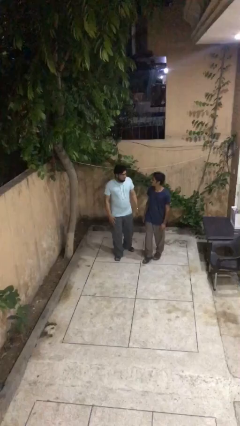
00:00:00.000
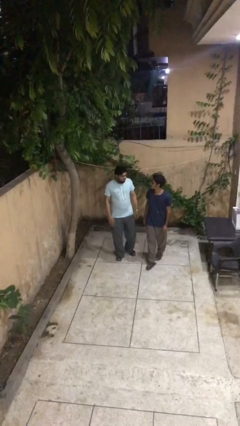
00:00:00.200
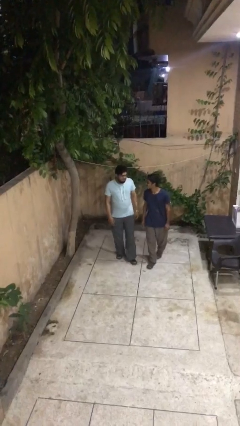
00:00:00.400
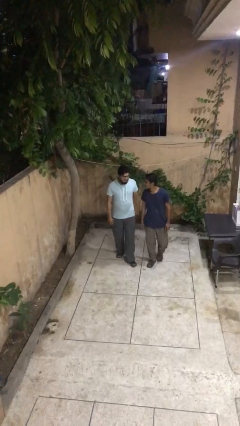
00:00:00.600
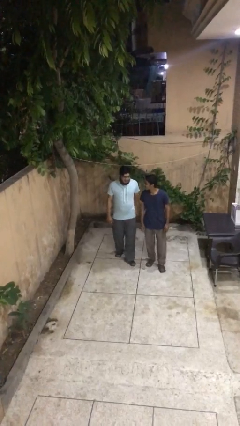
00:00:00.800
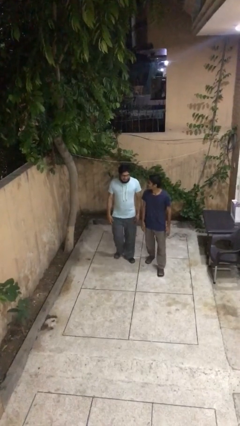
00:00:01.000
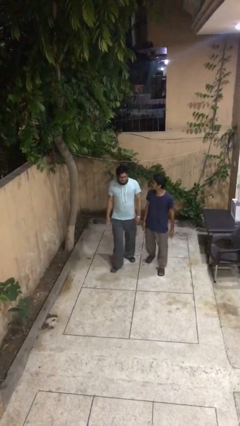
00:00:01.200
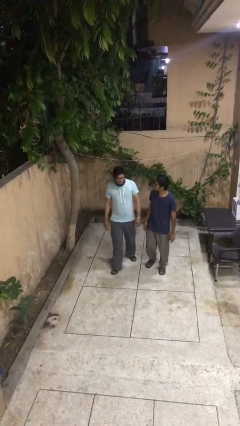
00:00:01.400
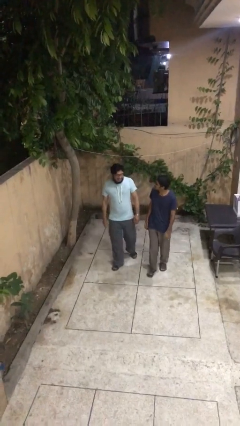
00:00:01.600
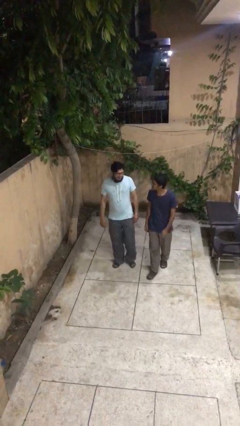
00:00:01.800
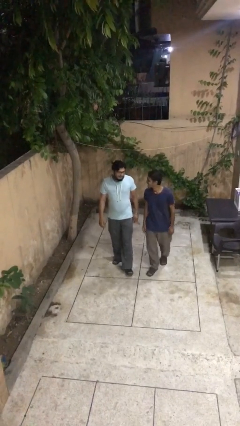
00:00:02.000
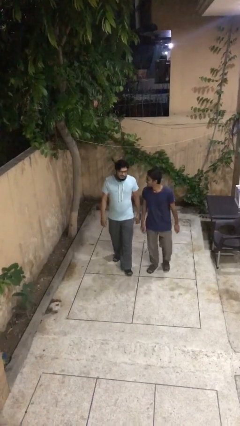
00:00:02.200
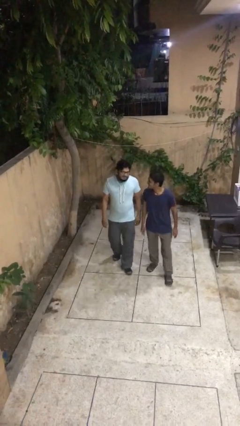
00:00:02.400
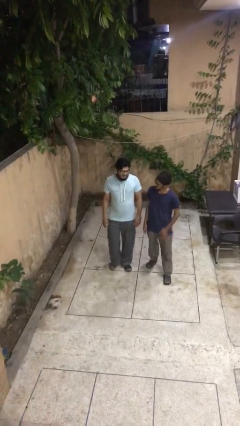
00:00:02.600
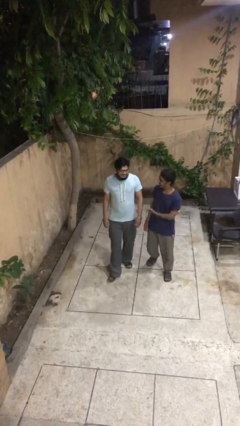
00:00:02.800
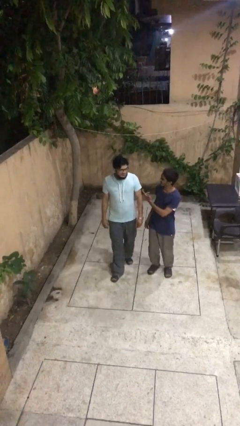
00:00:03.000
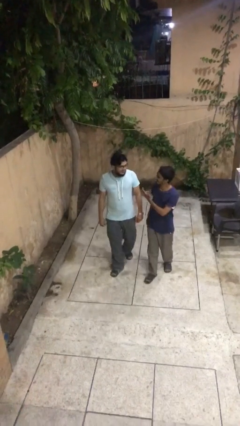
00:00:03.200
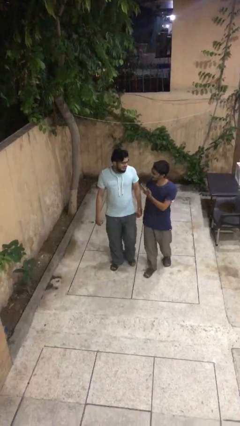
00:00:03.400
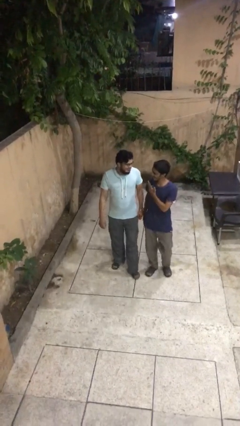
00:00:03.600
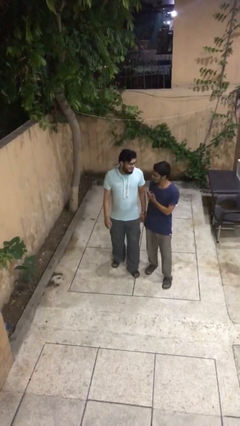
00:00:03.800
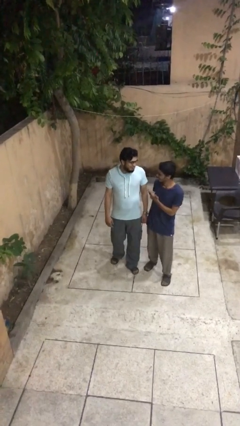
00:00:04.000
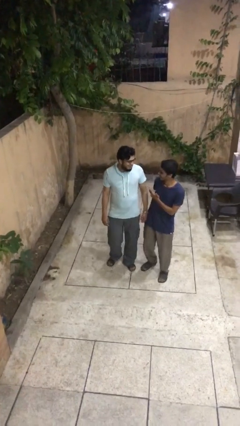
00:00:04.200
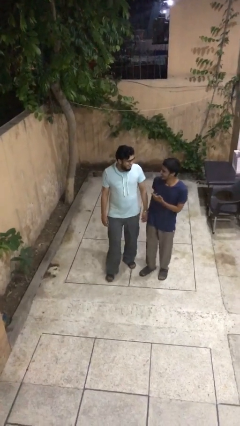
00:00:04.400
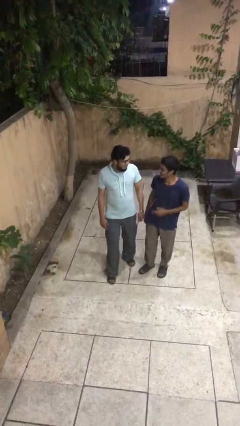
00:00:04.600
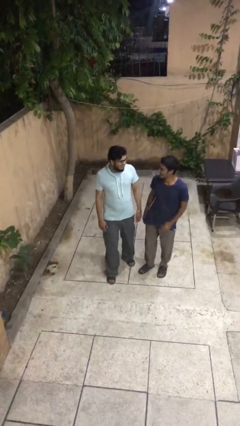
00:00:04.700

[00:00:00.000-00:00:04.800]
person talks to person

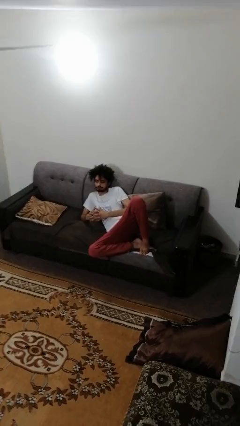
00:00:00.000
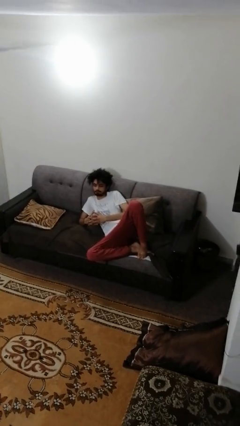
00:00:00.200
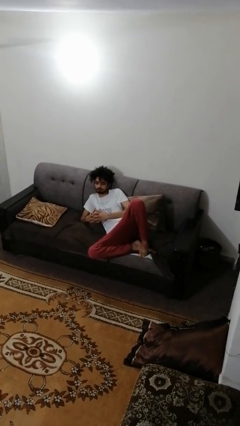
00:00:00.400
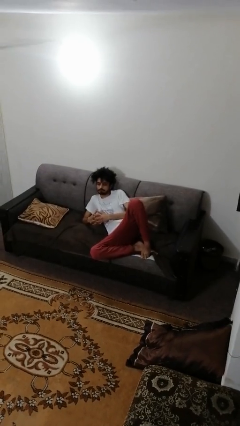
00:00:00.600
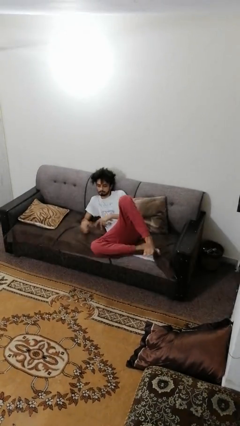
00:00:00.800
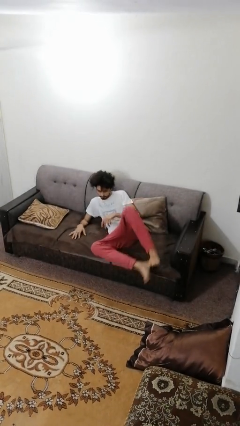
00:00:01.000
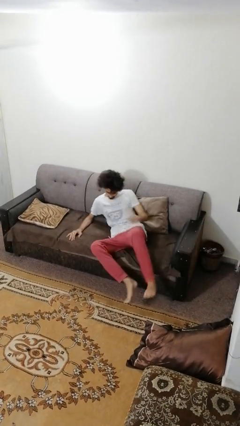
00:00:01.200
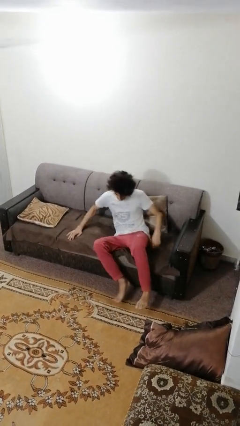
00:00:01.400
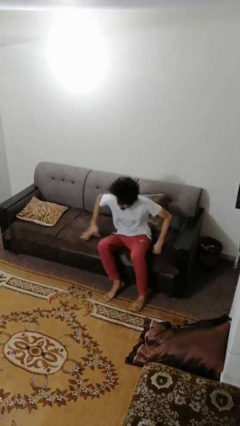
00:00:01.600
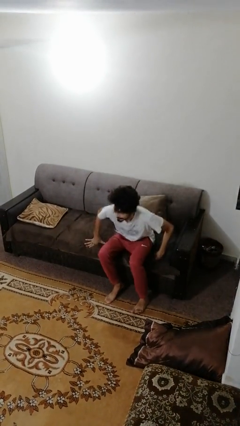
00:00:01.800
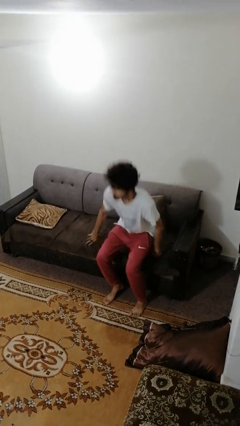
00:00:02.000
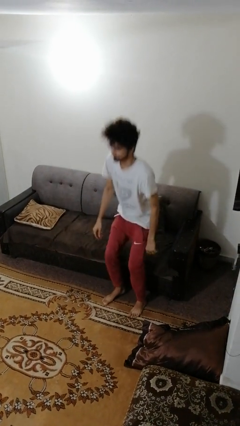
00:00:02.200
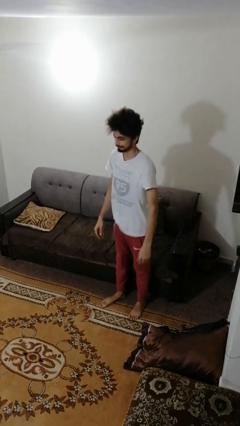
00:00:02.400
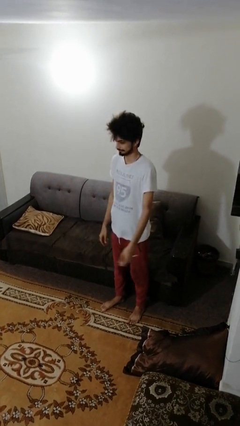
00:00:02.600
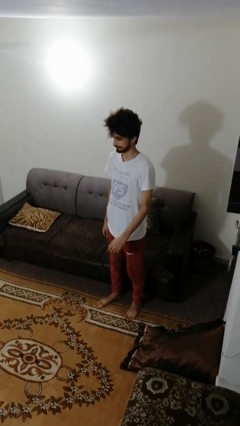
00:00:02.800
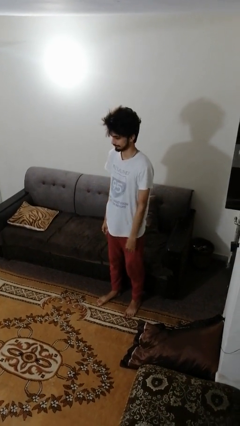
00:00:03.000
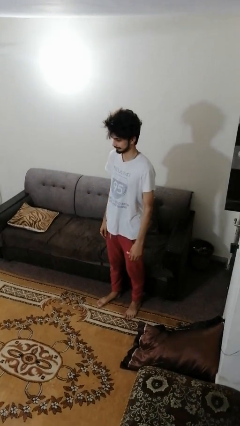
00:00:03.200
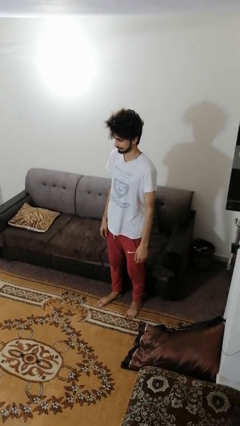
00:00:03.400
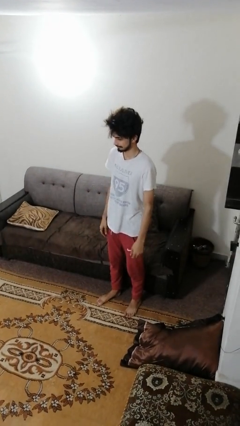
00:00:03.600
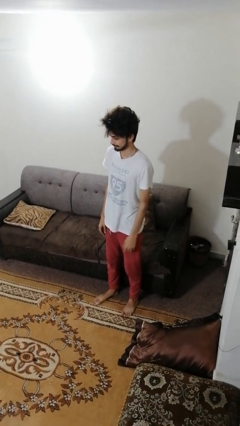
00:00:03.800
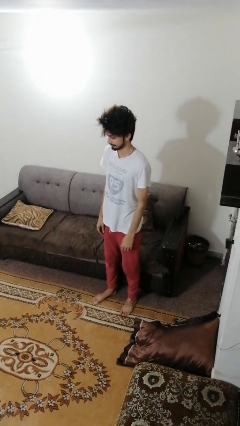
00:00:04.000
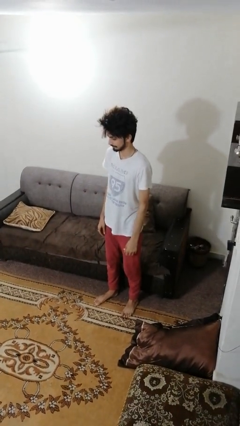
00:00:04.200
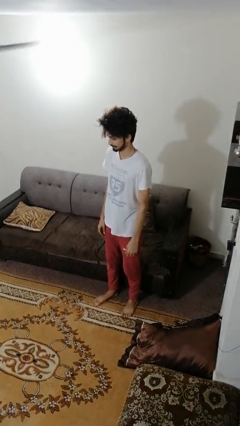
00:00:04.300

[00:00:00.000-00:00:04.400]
person stands up

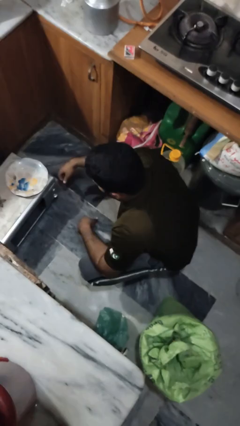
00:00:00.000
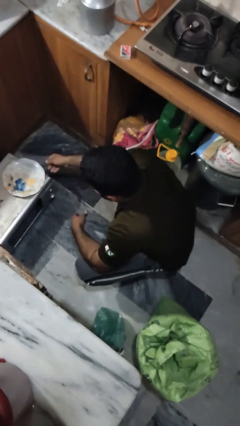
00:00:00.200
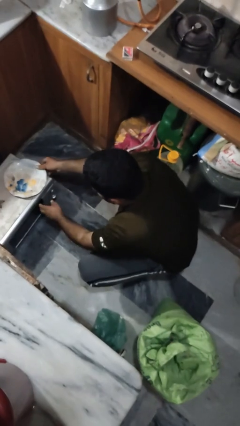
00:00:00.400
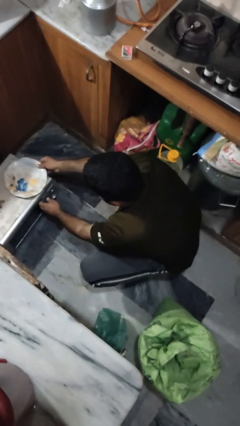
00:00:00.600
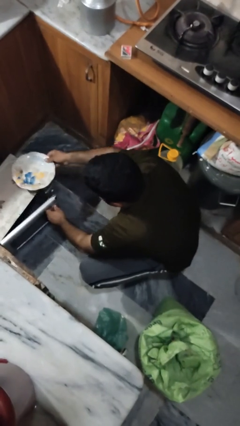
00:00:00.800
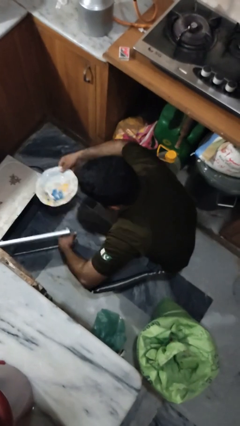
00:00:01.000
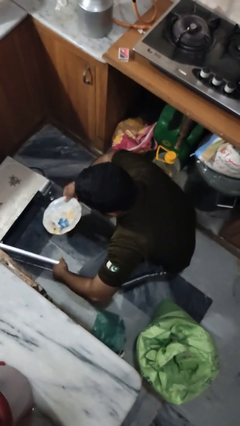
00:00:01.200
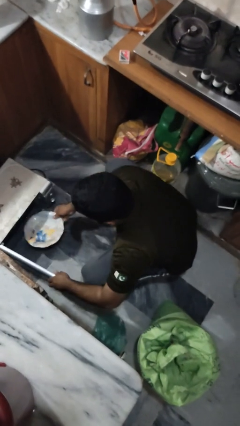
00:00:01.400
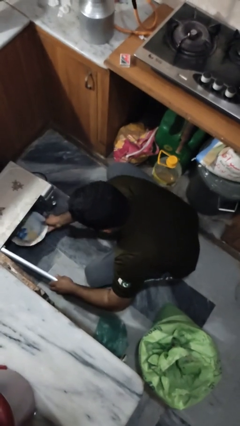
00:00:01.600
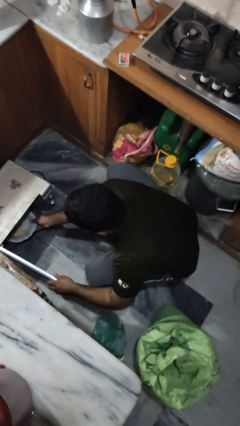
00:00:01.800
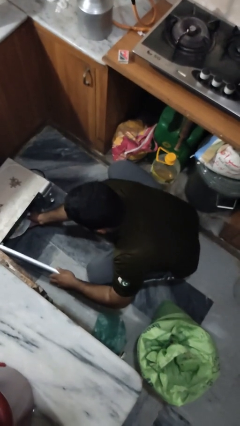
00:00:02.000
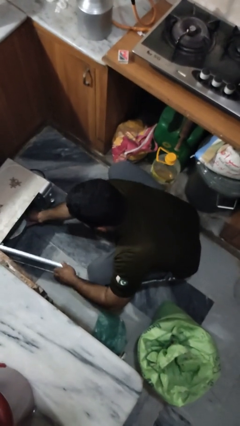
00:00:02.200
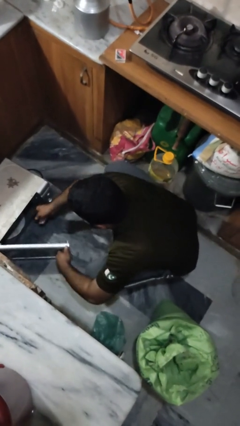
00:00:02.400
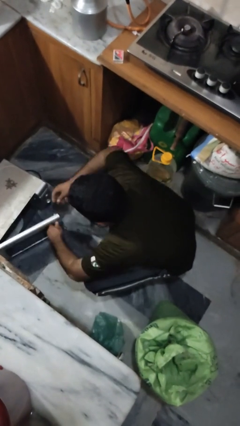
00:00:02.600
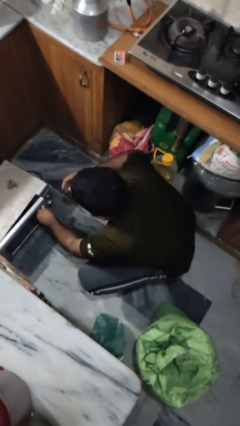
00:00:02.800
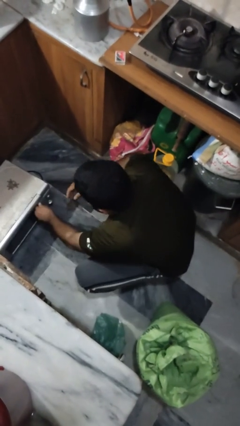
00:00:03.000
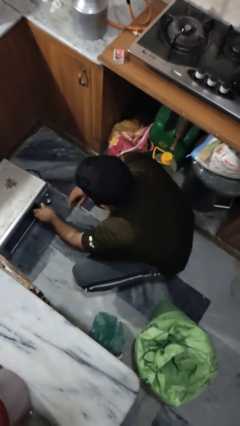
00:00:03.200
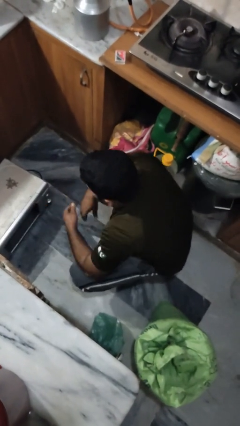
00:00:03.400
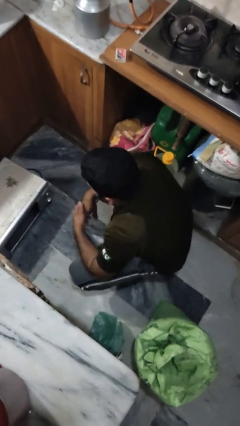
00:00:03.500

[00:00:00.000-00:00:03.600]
person puts object into oven

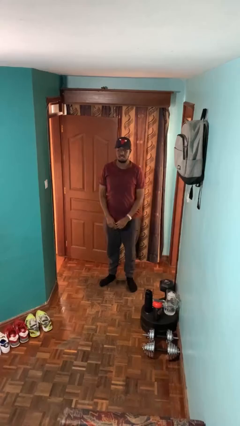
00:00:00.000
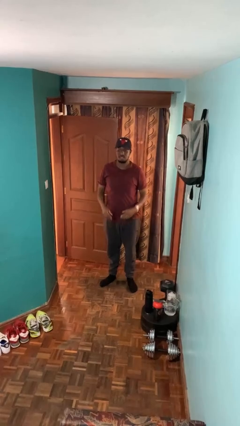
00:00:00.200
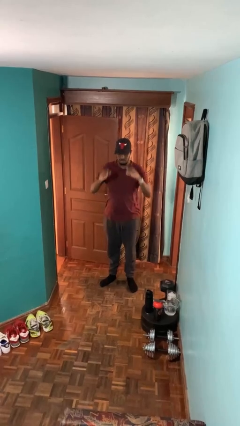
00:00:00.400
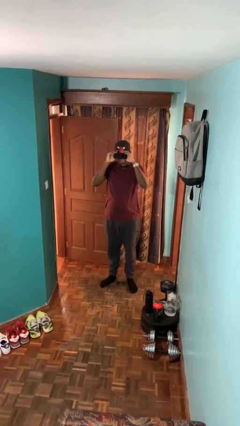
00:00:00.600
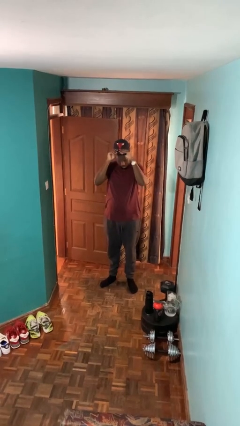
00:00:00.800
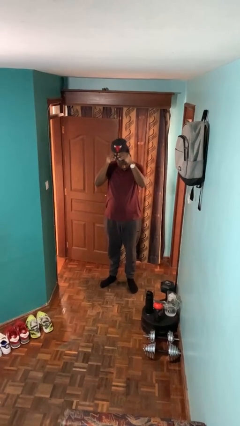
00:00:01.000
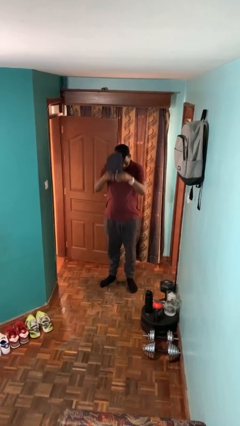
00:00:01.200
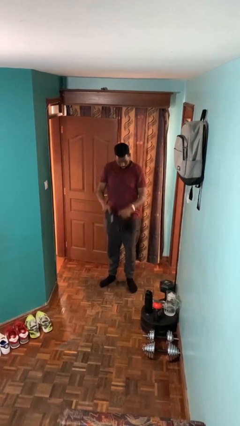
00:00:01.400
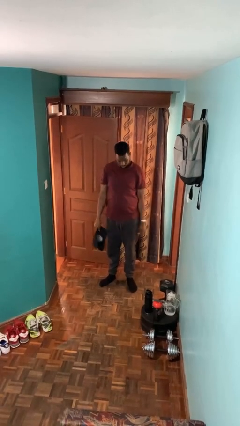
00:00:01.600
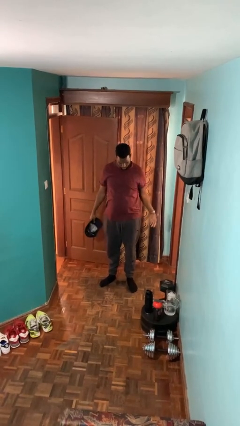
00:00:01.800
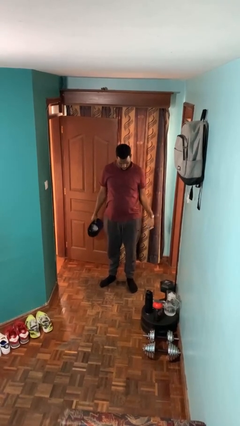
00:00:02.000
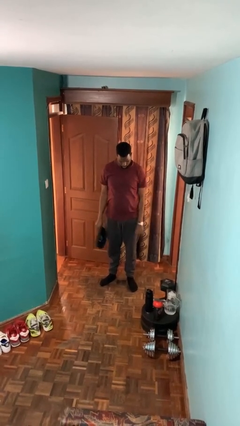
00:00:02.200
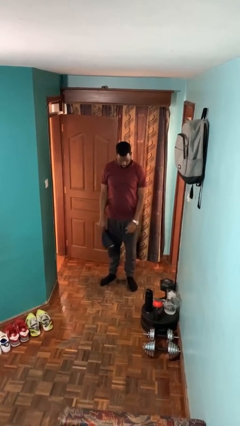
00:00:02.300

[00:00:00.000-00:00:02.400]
person takes off hat

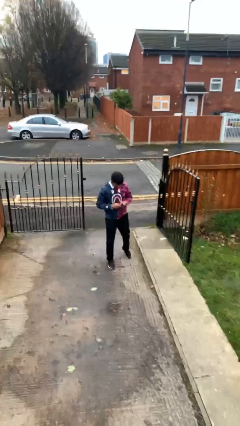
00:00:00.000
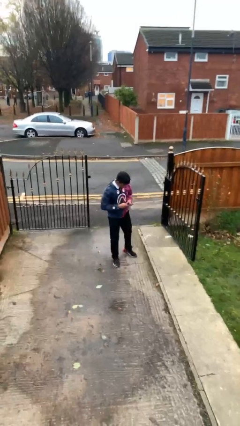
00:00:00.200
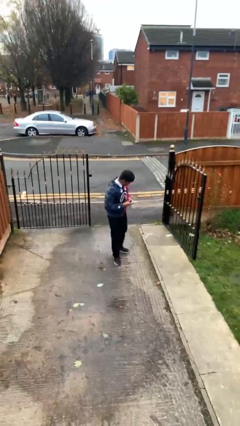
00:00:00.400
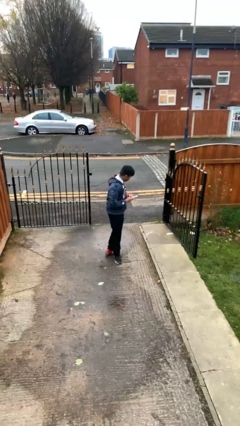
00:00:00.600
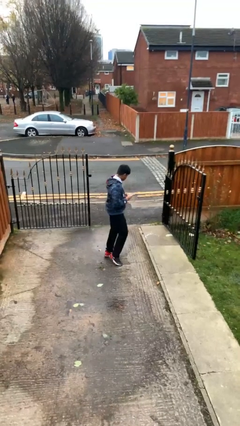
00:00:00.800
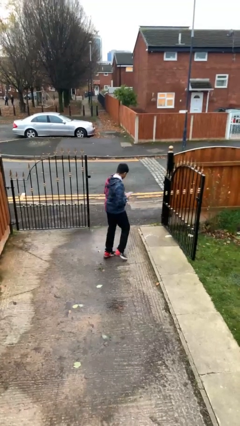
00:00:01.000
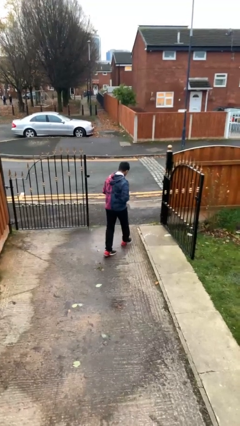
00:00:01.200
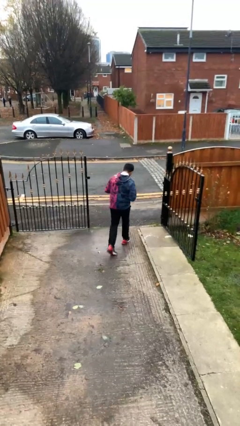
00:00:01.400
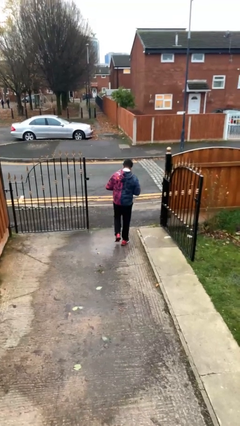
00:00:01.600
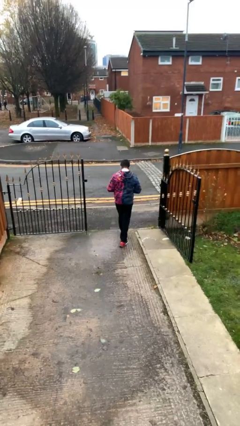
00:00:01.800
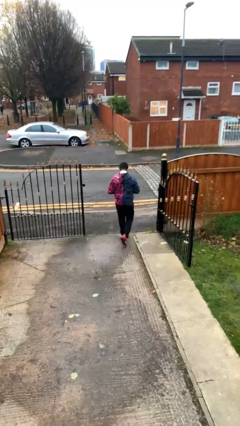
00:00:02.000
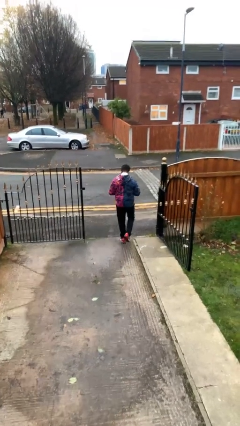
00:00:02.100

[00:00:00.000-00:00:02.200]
person exits scene through structure

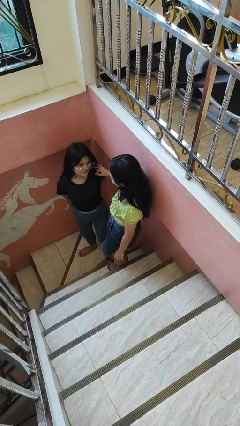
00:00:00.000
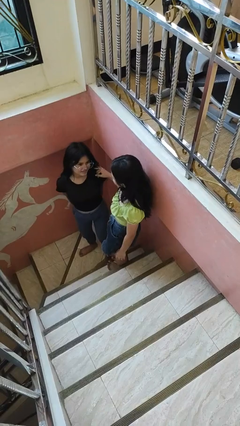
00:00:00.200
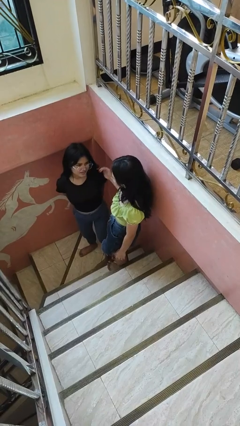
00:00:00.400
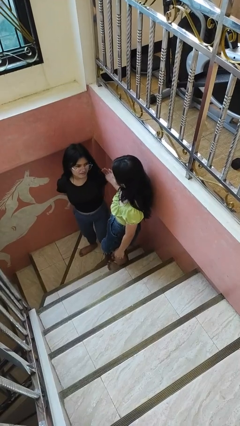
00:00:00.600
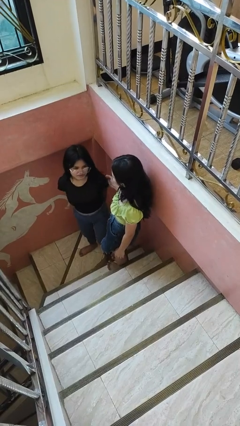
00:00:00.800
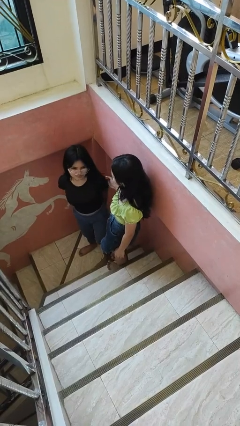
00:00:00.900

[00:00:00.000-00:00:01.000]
person spins person around
